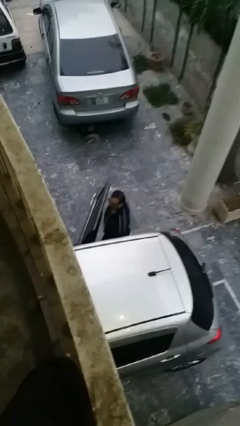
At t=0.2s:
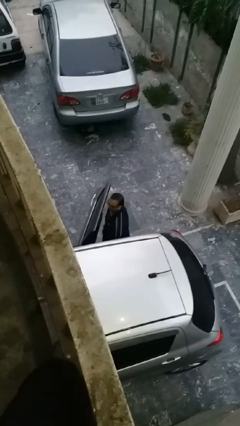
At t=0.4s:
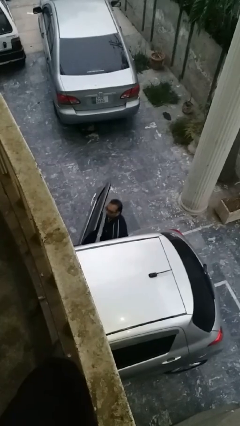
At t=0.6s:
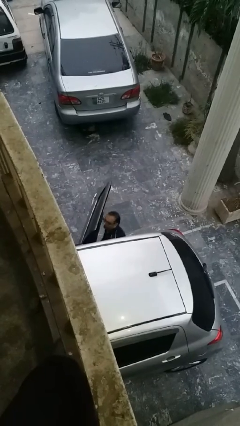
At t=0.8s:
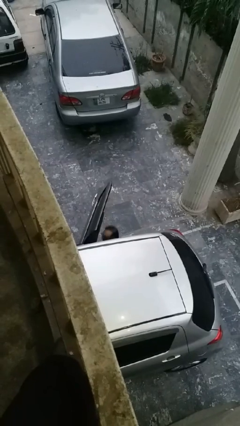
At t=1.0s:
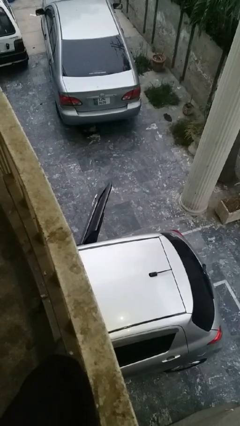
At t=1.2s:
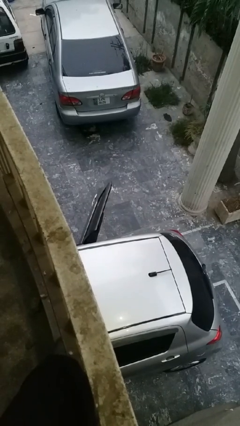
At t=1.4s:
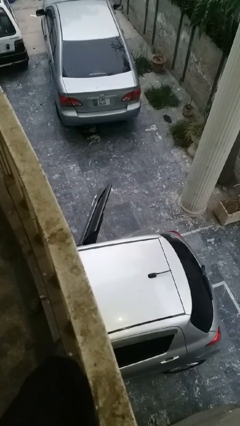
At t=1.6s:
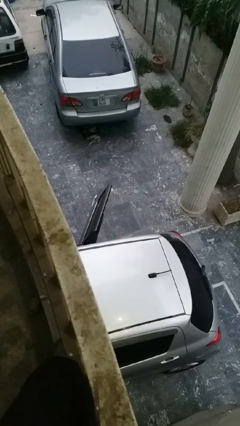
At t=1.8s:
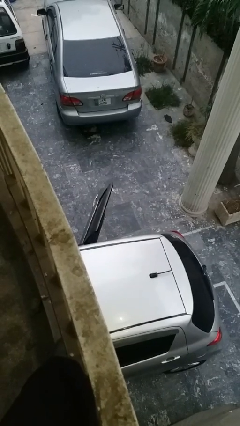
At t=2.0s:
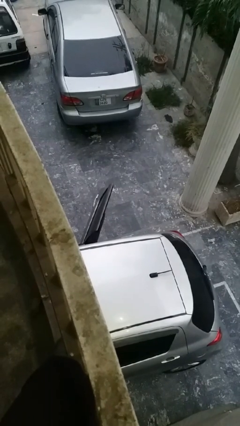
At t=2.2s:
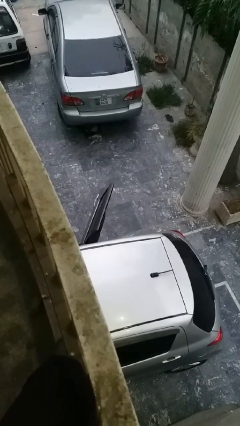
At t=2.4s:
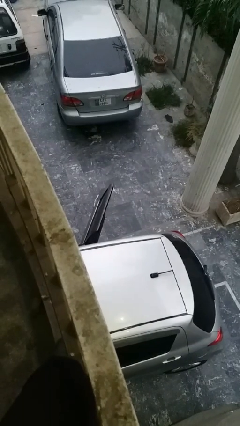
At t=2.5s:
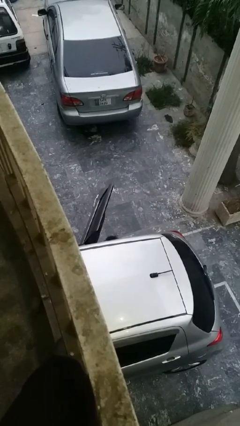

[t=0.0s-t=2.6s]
person enters car

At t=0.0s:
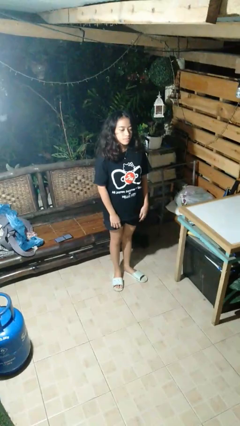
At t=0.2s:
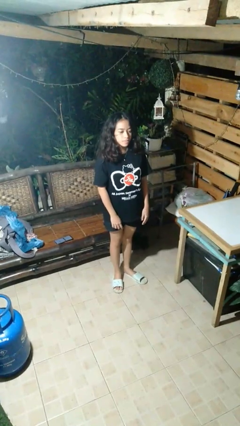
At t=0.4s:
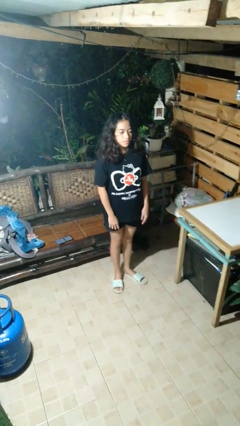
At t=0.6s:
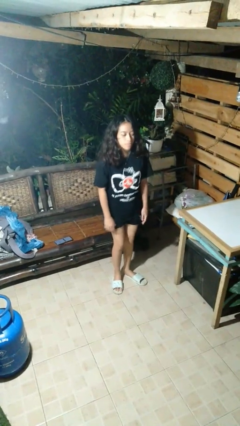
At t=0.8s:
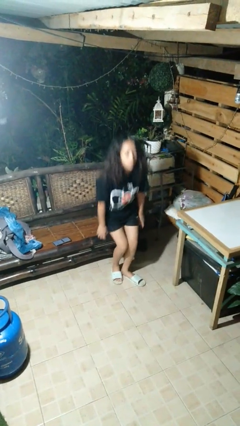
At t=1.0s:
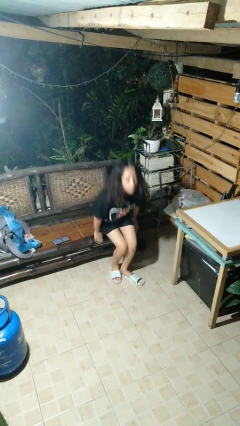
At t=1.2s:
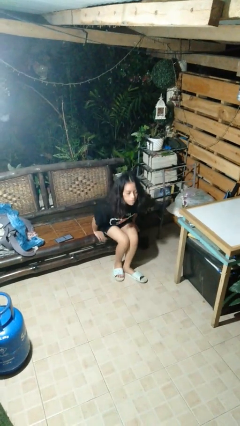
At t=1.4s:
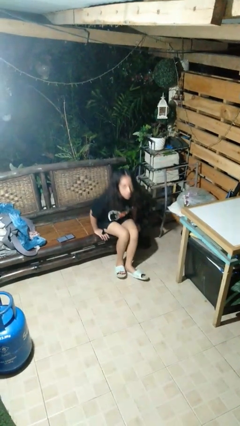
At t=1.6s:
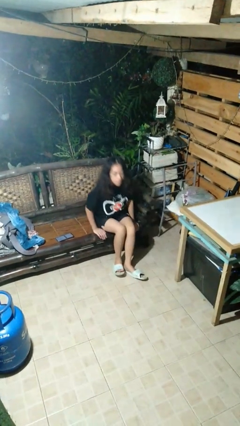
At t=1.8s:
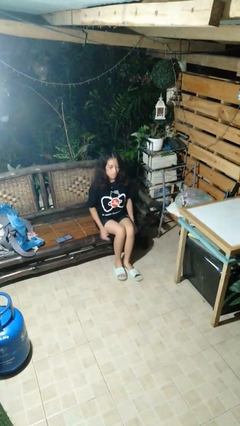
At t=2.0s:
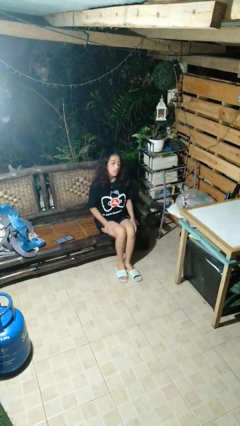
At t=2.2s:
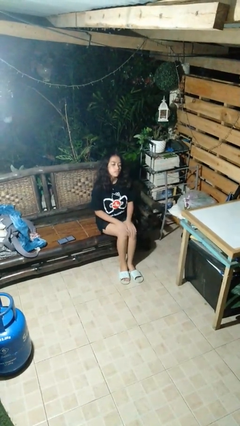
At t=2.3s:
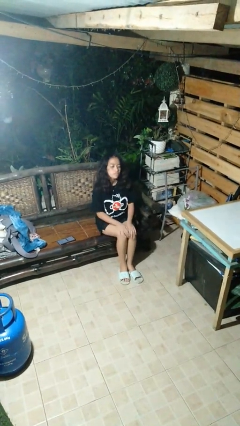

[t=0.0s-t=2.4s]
person sits down

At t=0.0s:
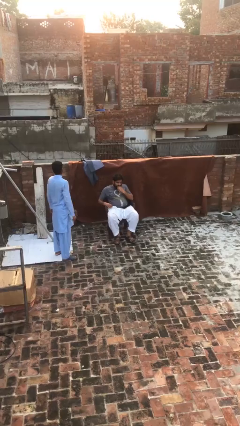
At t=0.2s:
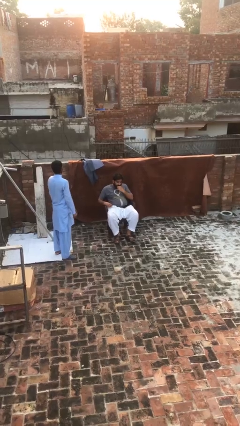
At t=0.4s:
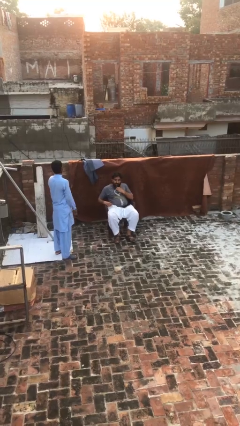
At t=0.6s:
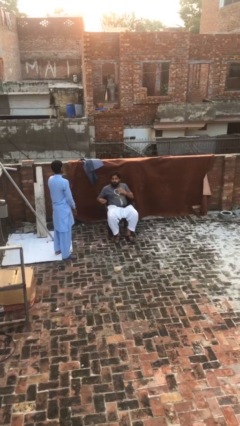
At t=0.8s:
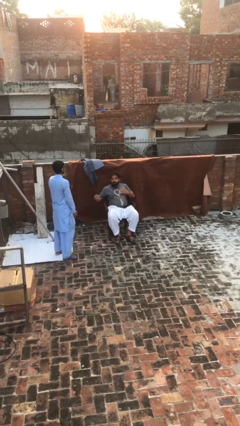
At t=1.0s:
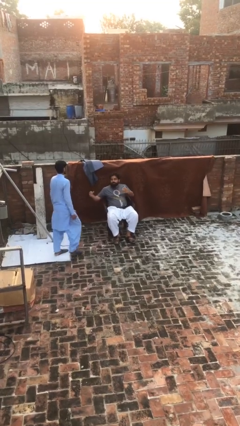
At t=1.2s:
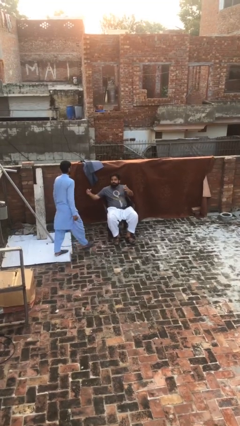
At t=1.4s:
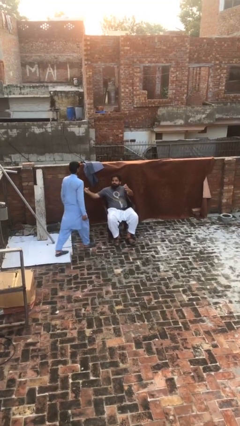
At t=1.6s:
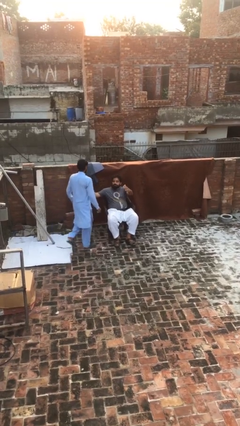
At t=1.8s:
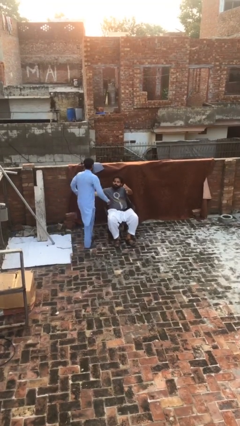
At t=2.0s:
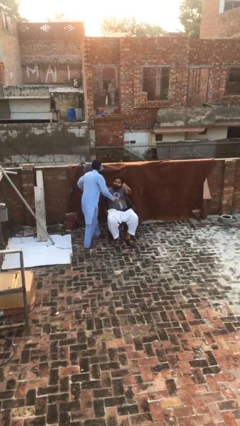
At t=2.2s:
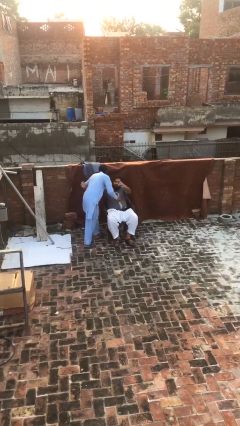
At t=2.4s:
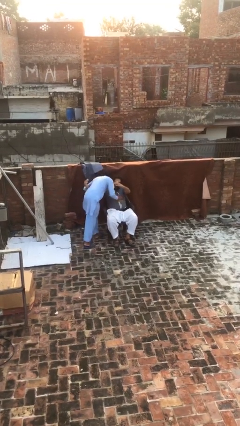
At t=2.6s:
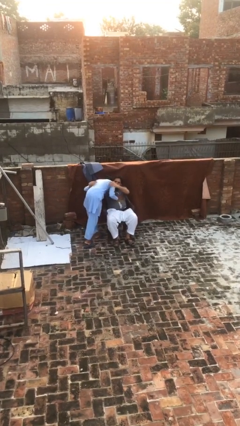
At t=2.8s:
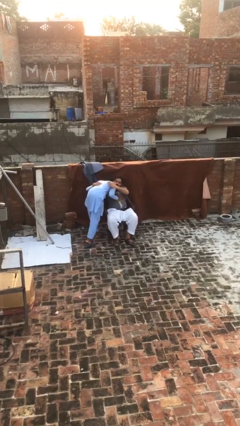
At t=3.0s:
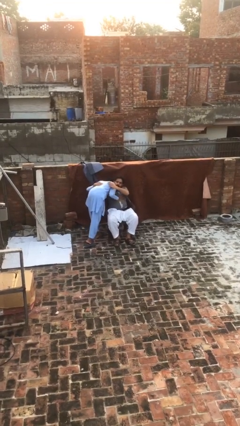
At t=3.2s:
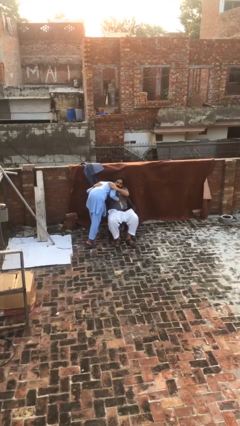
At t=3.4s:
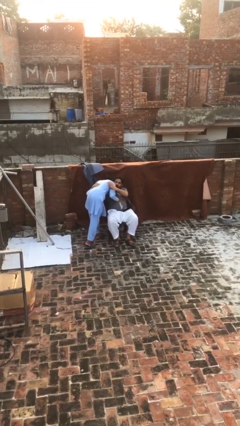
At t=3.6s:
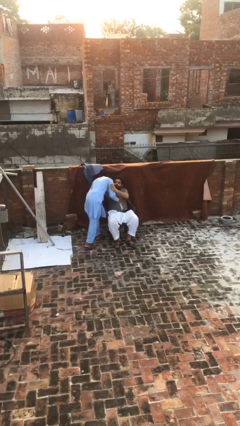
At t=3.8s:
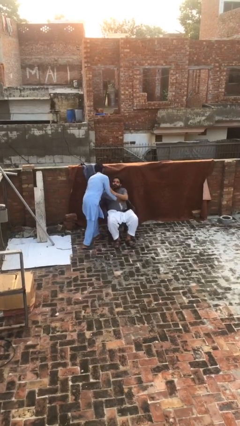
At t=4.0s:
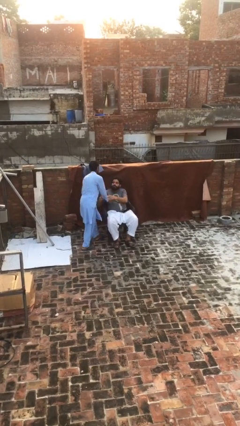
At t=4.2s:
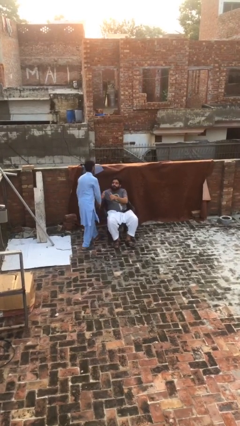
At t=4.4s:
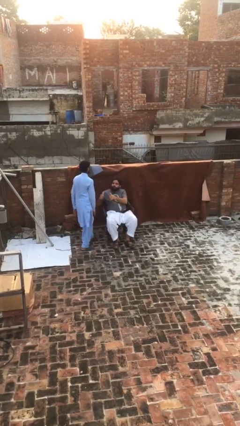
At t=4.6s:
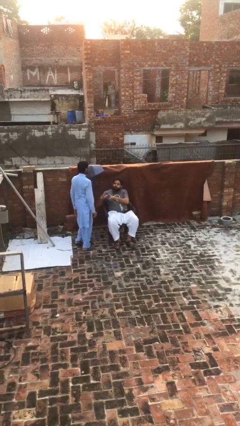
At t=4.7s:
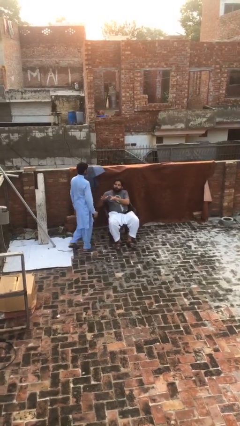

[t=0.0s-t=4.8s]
person embraces person

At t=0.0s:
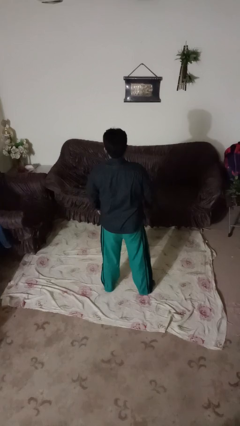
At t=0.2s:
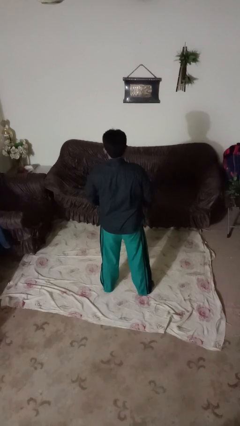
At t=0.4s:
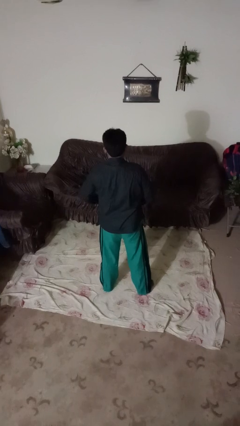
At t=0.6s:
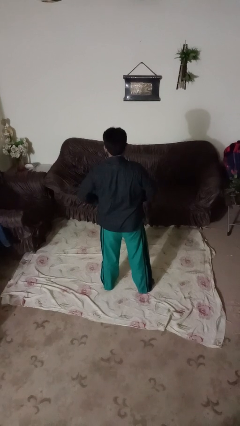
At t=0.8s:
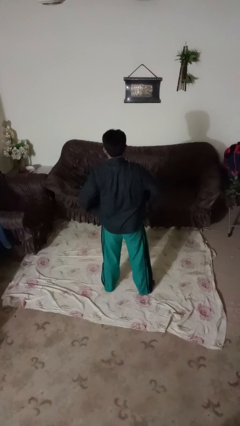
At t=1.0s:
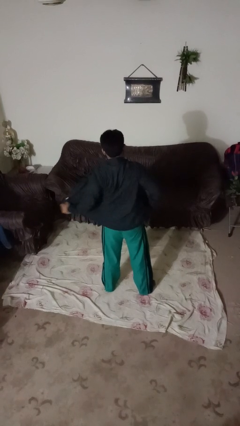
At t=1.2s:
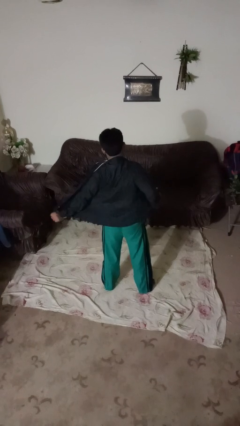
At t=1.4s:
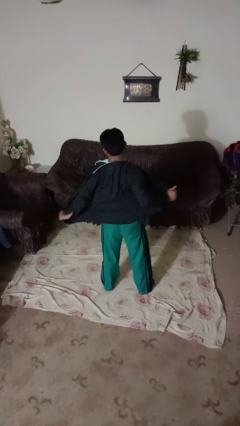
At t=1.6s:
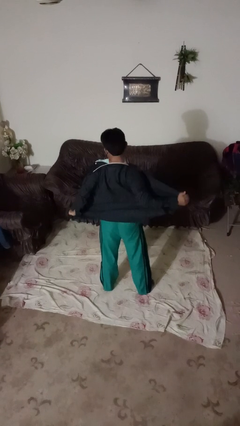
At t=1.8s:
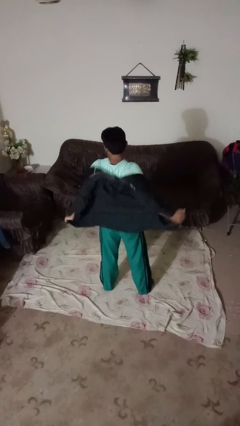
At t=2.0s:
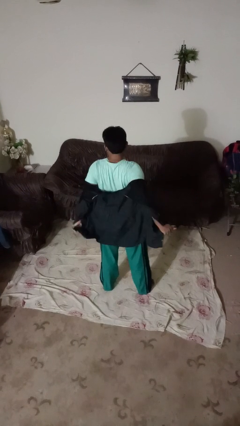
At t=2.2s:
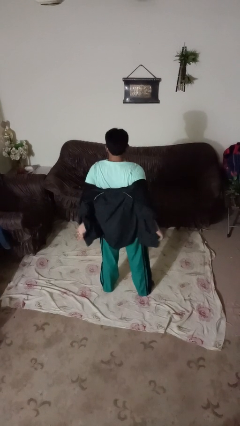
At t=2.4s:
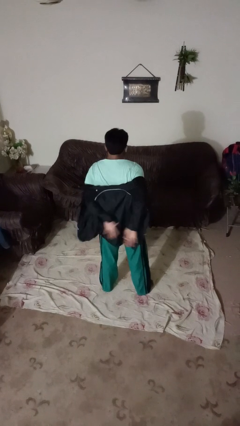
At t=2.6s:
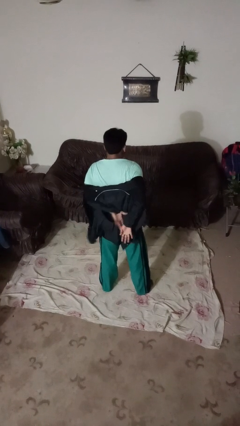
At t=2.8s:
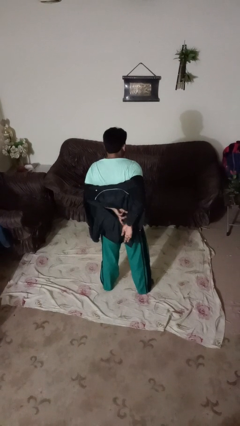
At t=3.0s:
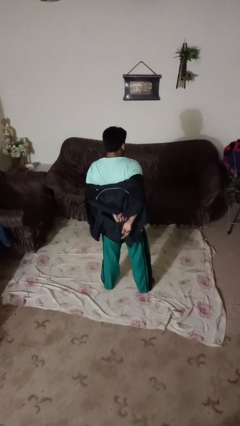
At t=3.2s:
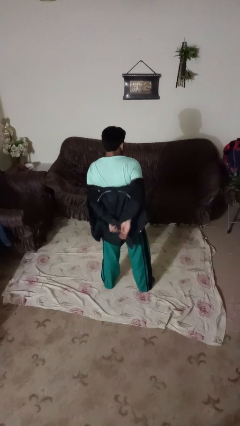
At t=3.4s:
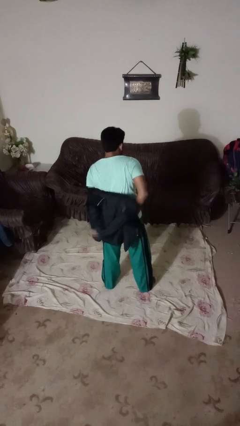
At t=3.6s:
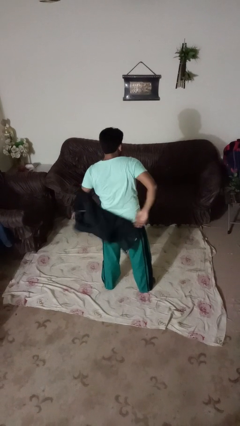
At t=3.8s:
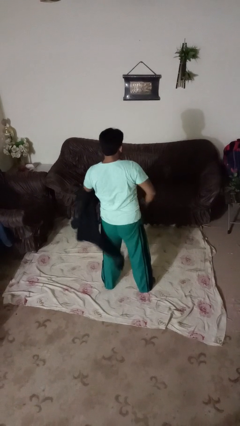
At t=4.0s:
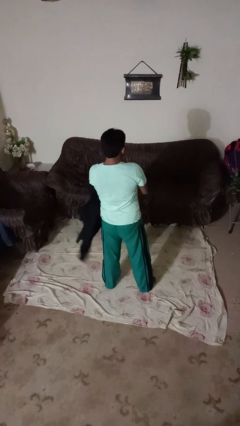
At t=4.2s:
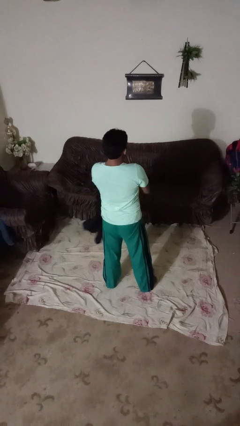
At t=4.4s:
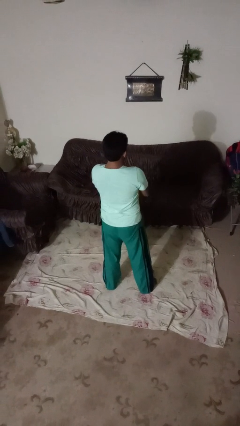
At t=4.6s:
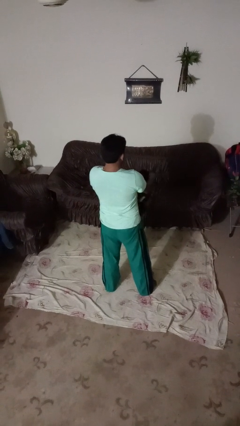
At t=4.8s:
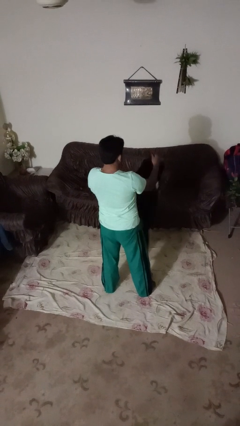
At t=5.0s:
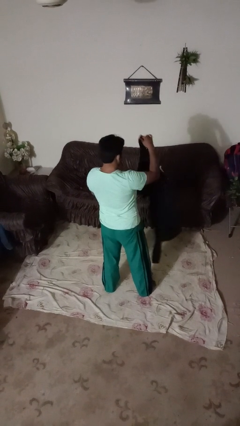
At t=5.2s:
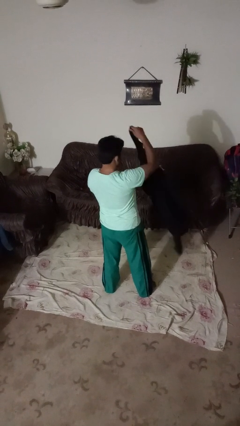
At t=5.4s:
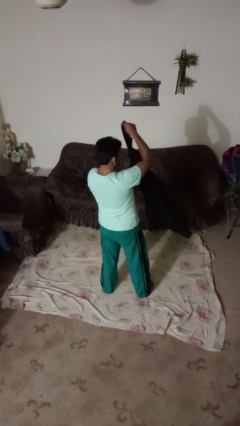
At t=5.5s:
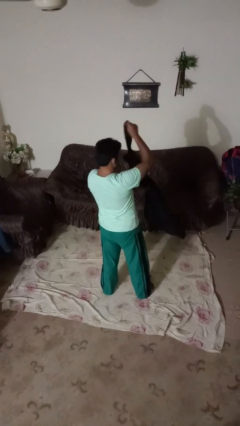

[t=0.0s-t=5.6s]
person takes off shirt

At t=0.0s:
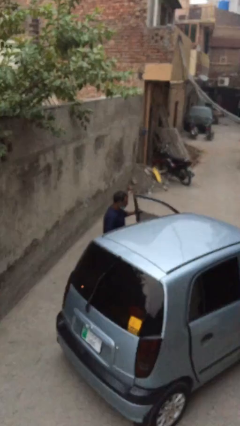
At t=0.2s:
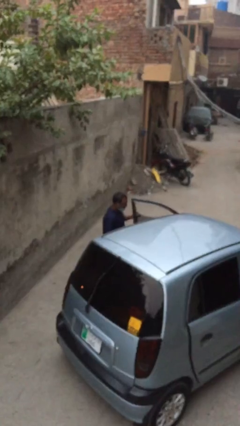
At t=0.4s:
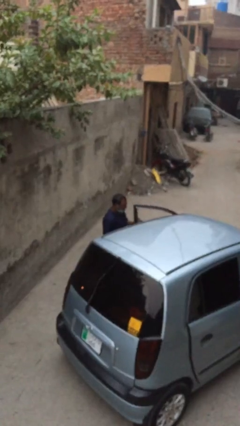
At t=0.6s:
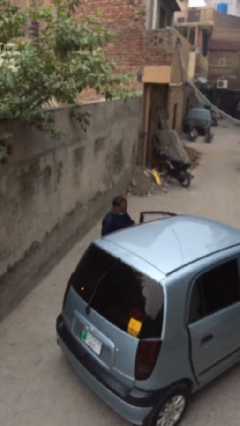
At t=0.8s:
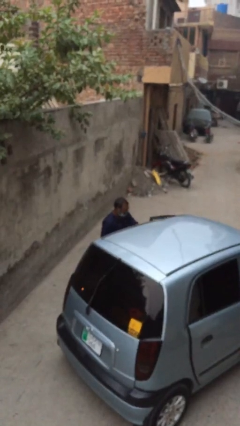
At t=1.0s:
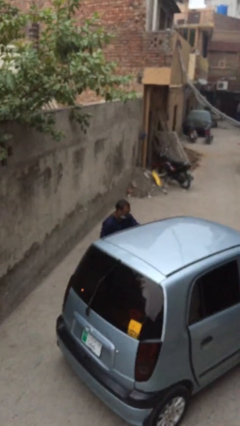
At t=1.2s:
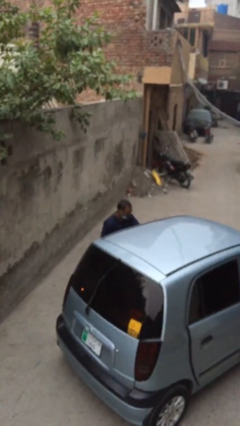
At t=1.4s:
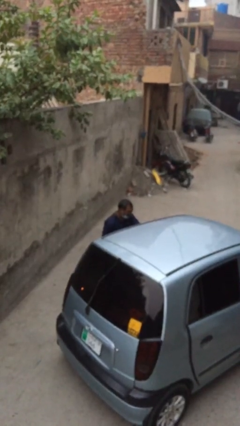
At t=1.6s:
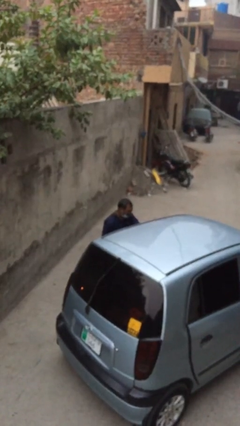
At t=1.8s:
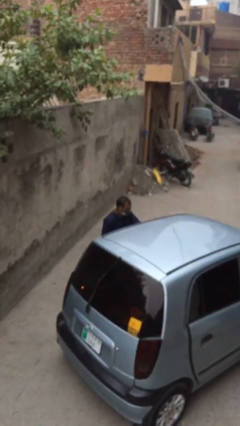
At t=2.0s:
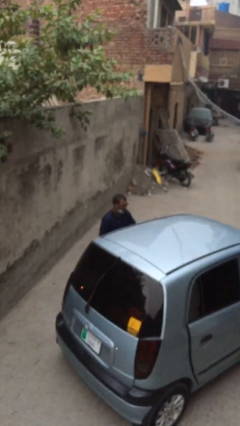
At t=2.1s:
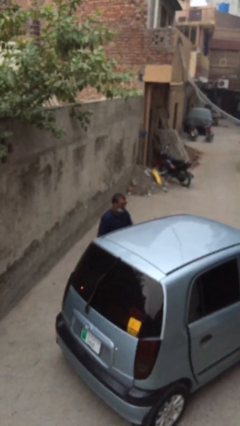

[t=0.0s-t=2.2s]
person closes car door
